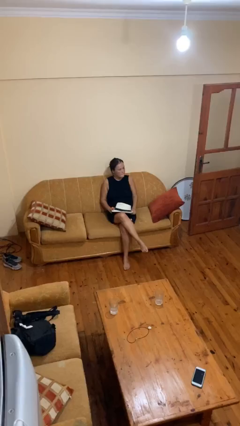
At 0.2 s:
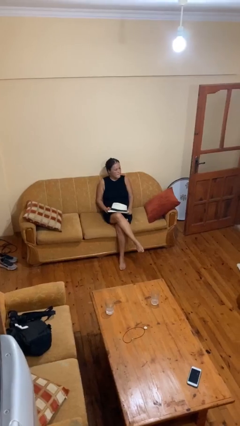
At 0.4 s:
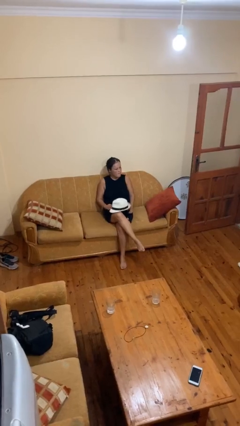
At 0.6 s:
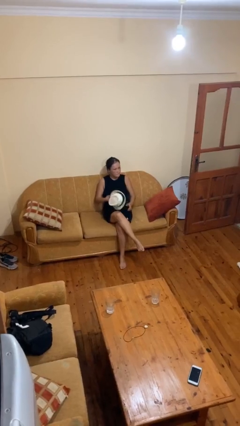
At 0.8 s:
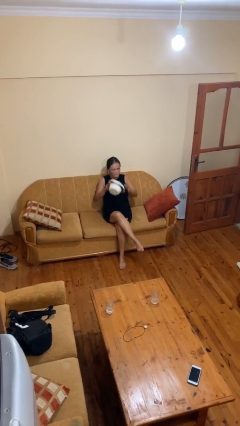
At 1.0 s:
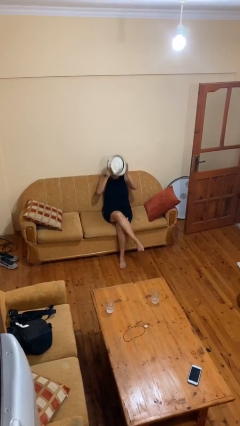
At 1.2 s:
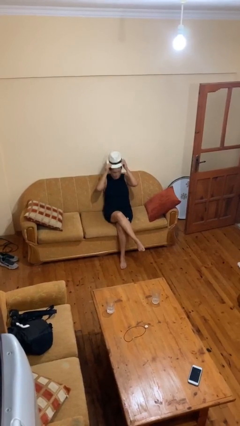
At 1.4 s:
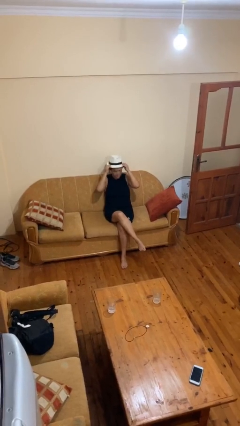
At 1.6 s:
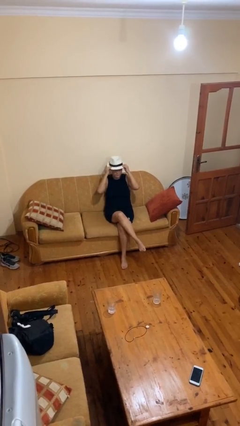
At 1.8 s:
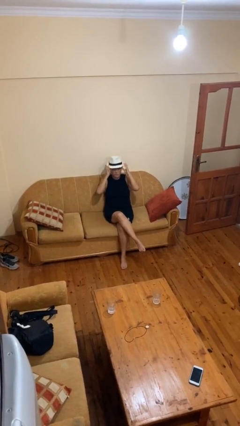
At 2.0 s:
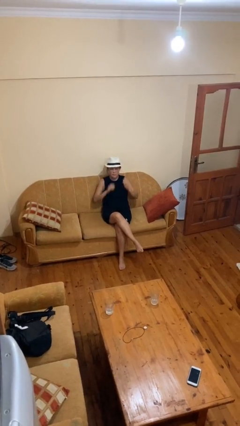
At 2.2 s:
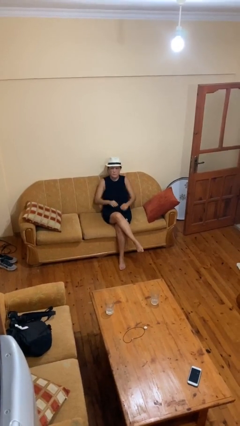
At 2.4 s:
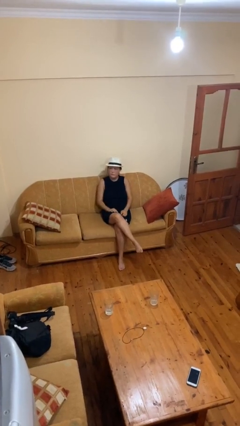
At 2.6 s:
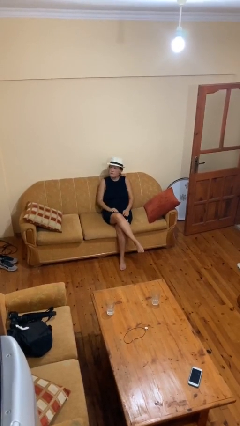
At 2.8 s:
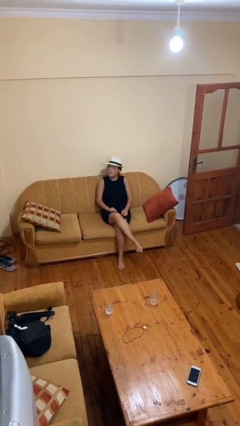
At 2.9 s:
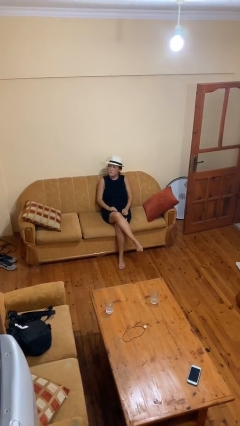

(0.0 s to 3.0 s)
person puts on hat

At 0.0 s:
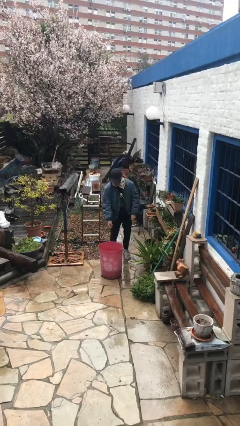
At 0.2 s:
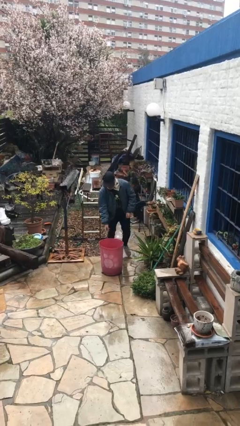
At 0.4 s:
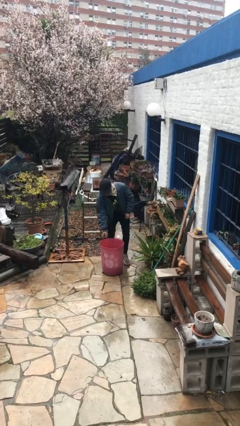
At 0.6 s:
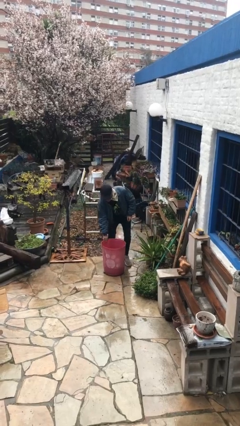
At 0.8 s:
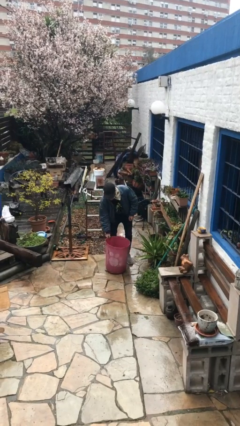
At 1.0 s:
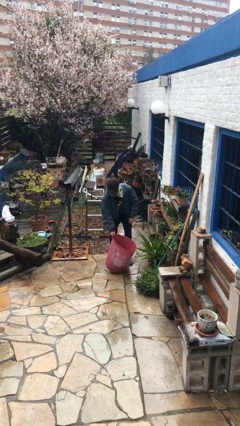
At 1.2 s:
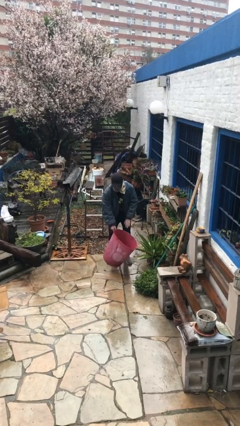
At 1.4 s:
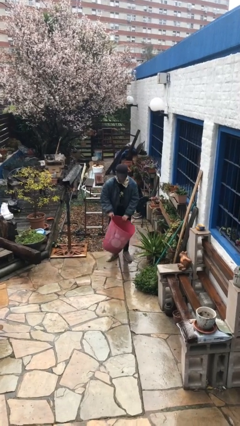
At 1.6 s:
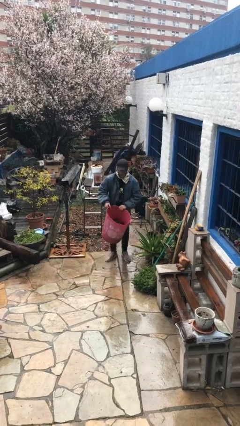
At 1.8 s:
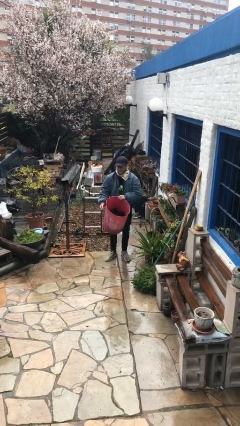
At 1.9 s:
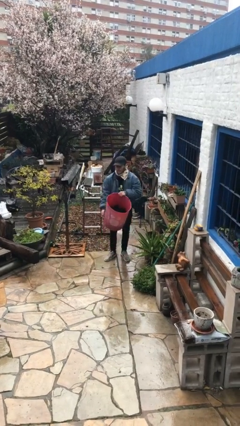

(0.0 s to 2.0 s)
person picks up object from floor

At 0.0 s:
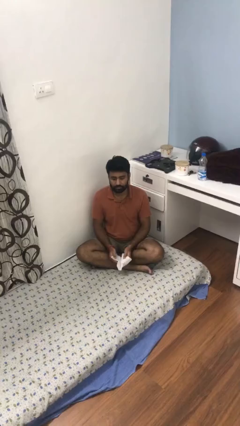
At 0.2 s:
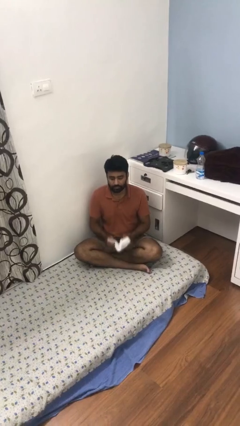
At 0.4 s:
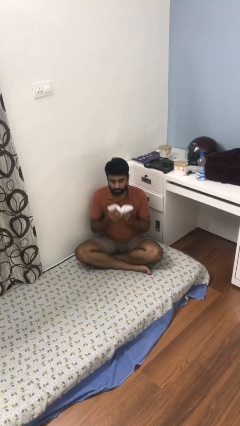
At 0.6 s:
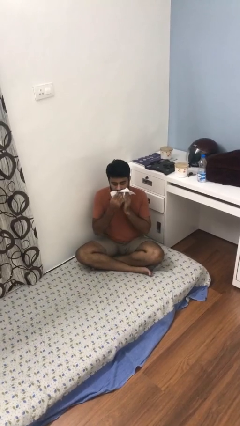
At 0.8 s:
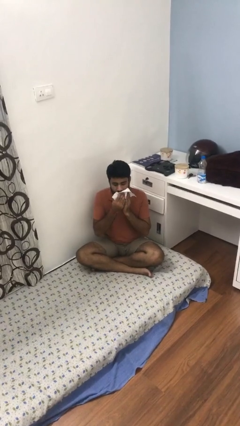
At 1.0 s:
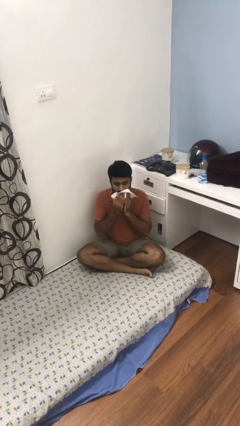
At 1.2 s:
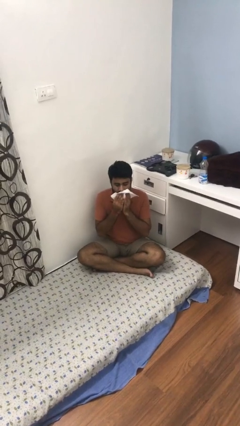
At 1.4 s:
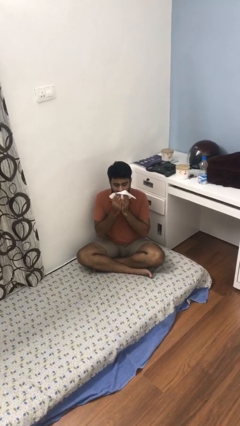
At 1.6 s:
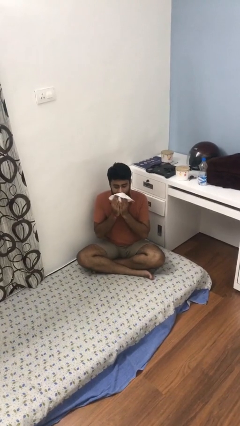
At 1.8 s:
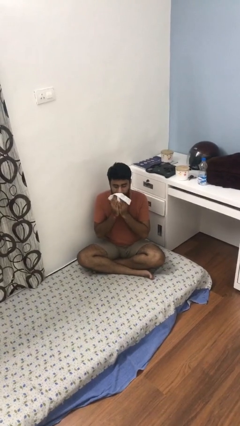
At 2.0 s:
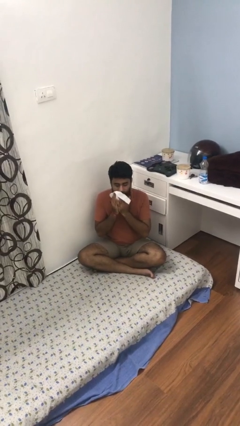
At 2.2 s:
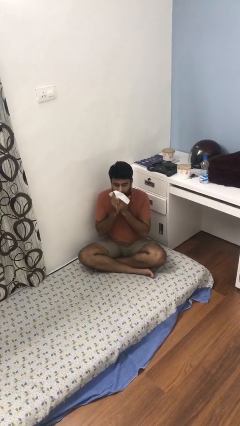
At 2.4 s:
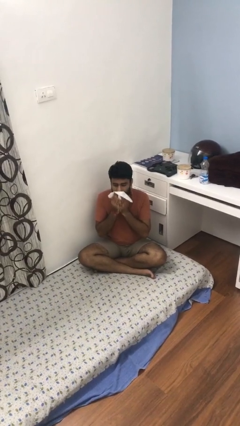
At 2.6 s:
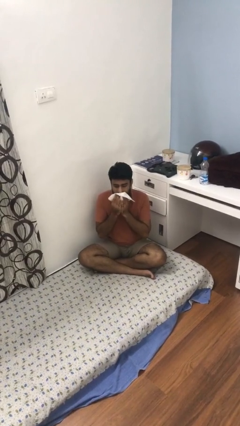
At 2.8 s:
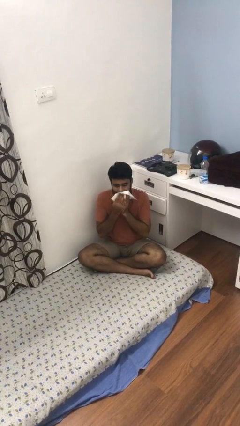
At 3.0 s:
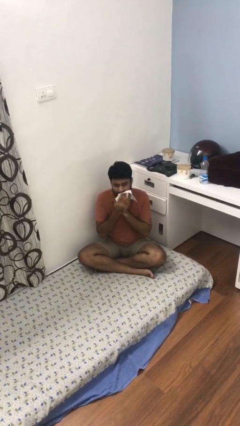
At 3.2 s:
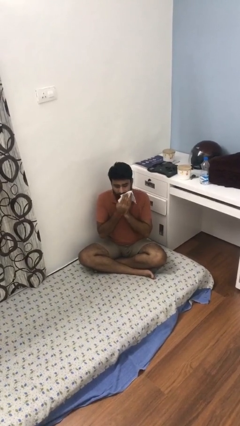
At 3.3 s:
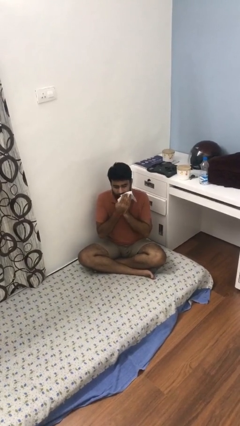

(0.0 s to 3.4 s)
person wipes mouth with napkin

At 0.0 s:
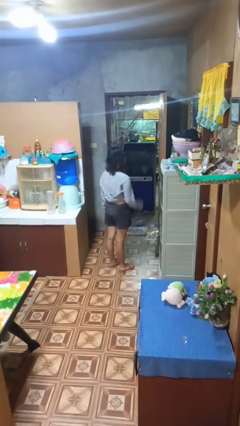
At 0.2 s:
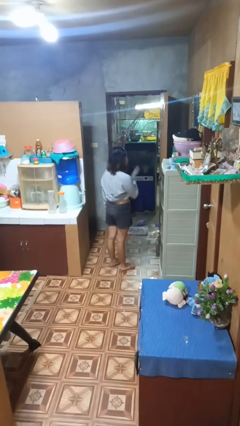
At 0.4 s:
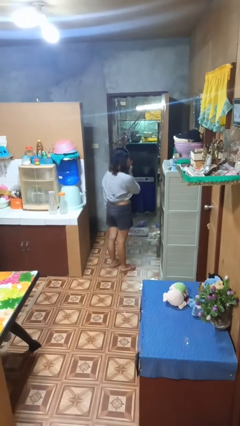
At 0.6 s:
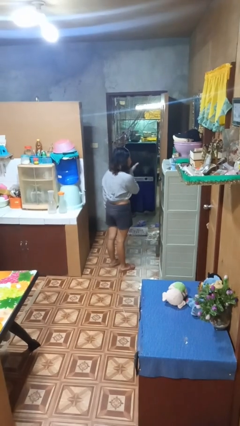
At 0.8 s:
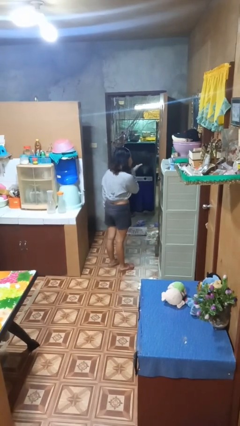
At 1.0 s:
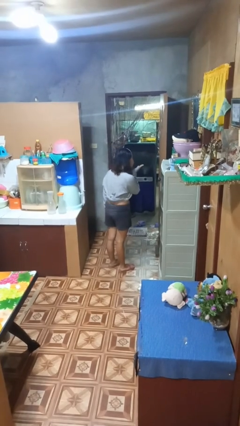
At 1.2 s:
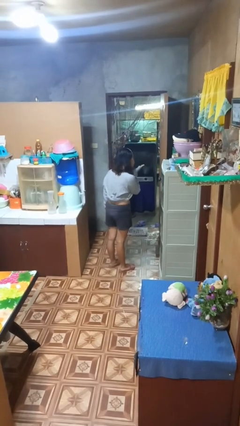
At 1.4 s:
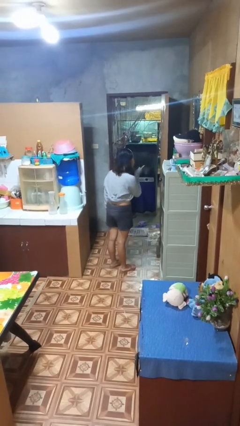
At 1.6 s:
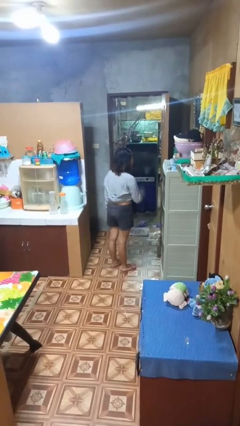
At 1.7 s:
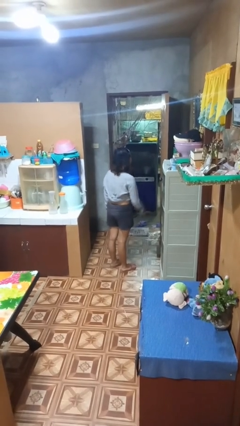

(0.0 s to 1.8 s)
person gestures blow kiss

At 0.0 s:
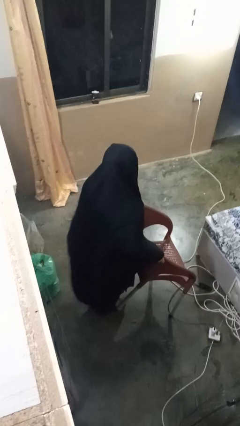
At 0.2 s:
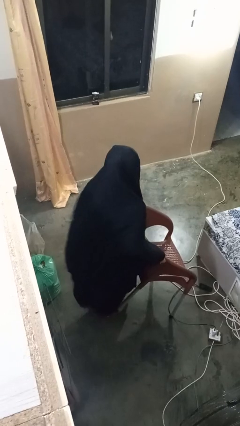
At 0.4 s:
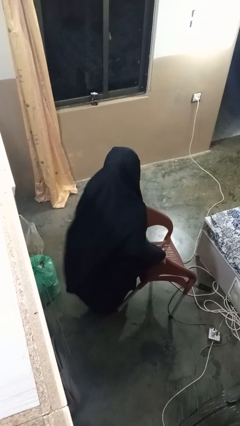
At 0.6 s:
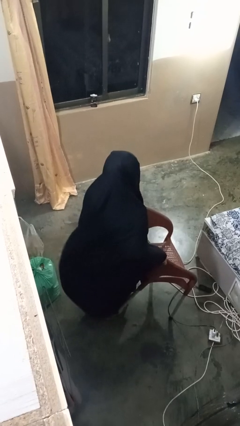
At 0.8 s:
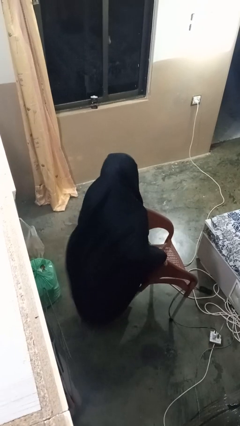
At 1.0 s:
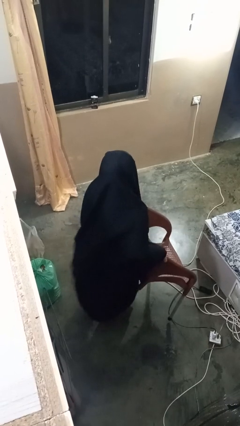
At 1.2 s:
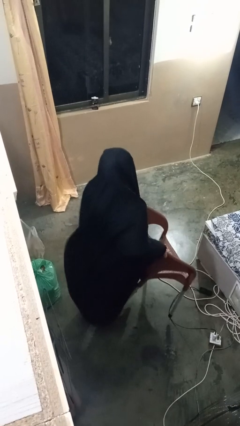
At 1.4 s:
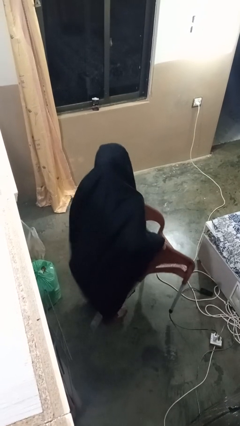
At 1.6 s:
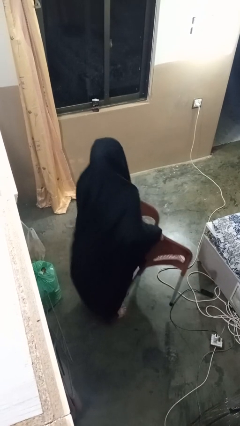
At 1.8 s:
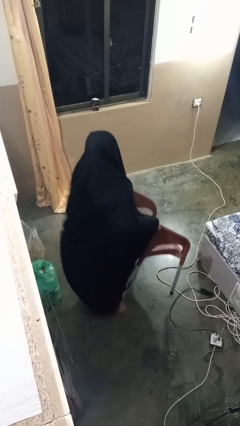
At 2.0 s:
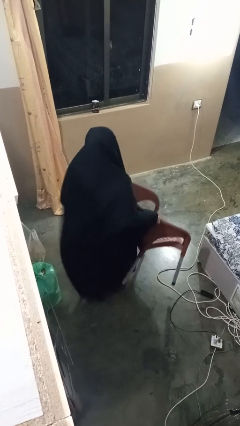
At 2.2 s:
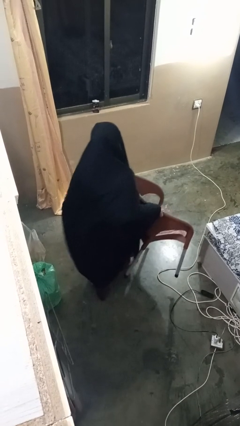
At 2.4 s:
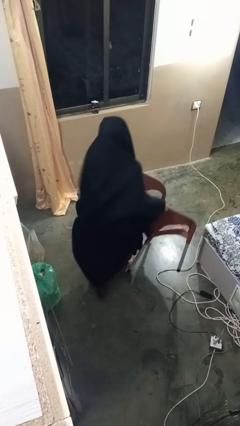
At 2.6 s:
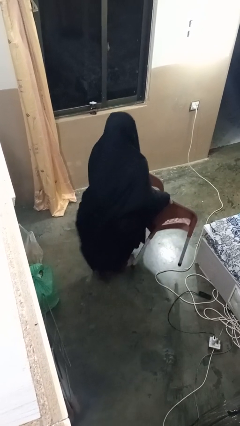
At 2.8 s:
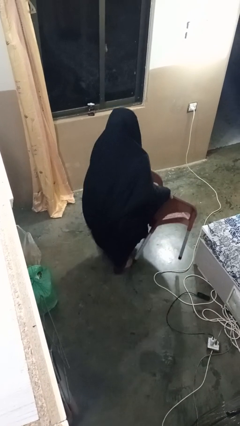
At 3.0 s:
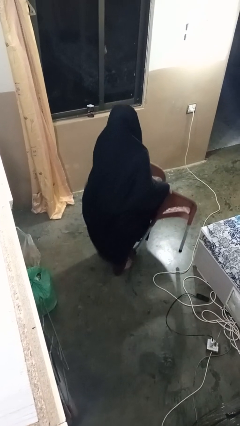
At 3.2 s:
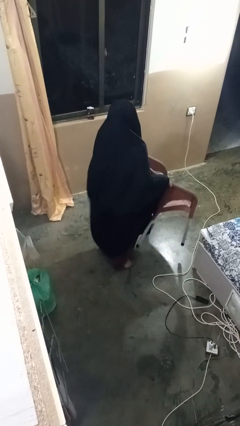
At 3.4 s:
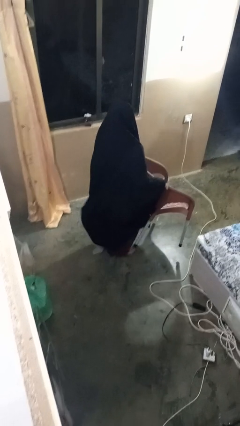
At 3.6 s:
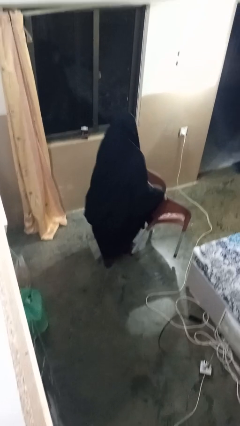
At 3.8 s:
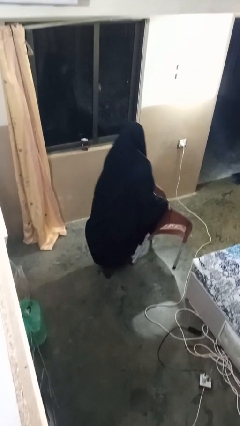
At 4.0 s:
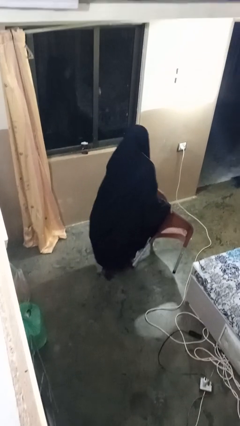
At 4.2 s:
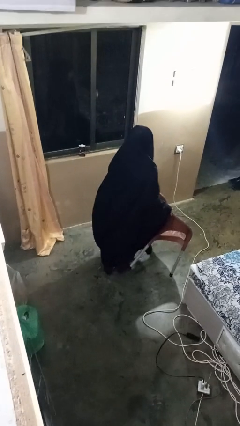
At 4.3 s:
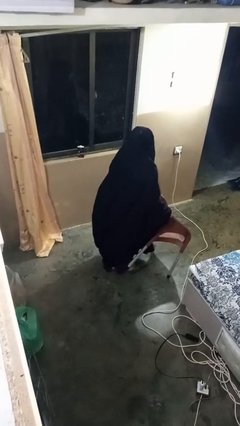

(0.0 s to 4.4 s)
person carries furniture

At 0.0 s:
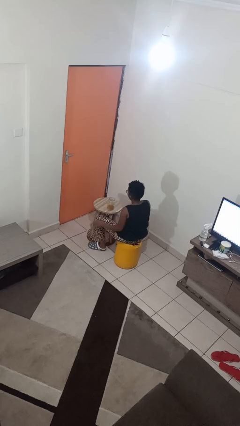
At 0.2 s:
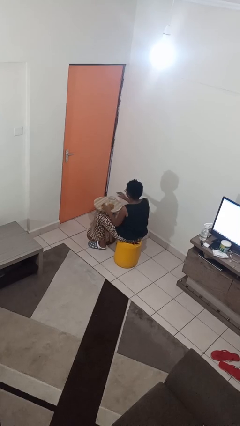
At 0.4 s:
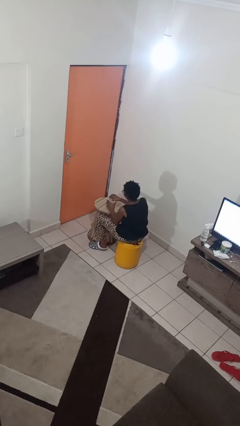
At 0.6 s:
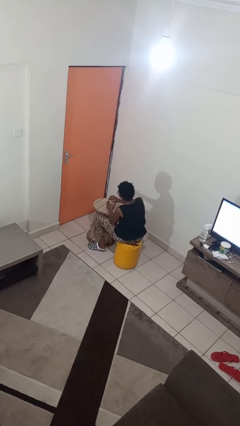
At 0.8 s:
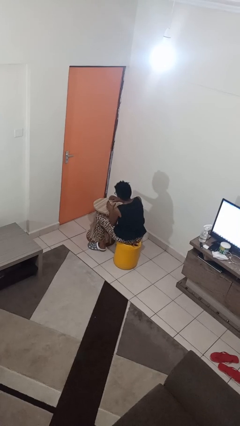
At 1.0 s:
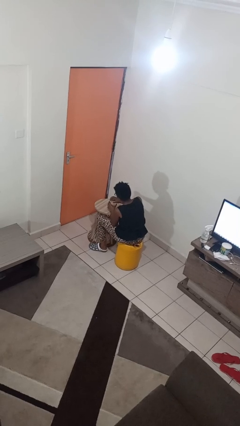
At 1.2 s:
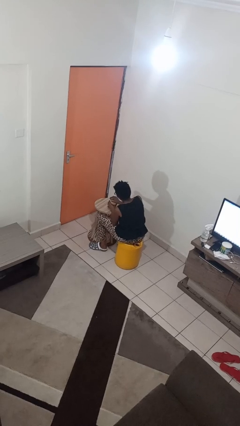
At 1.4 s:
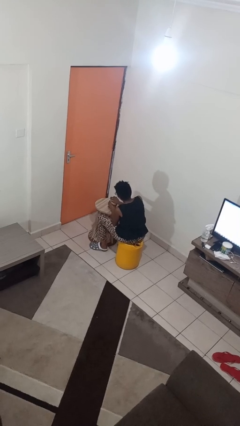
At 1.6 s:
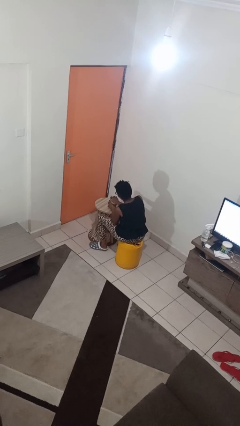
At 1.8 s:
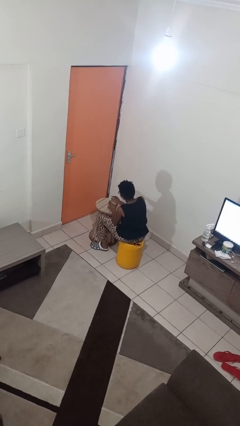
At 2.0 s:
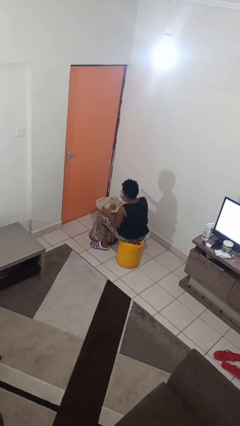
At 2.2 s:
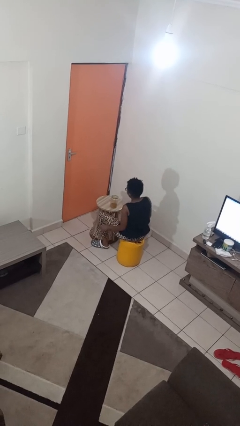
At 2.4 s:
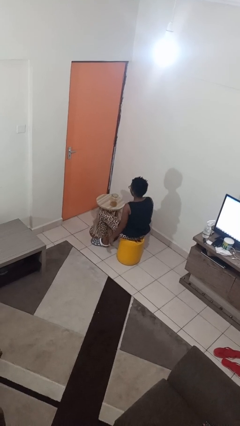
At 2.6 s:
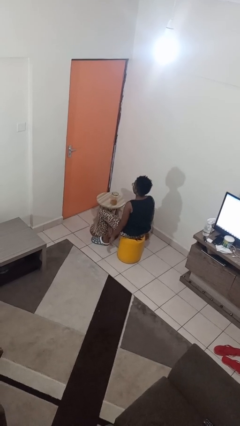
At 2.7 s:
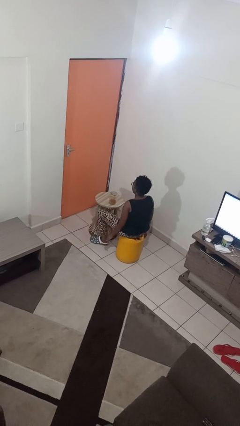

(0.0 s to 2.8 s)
person closes jar

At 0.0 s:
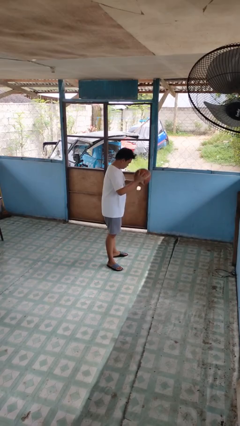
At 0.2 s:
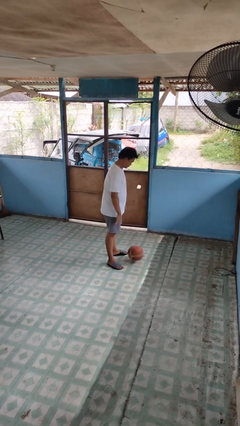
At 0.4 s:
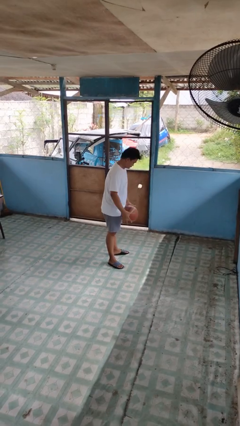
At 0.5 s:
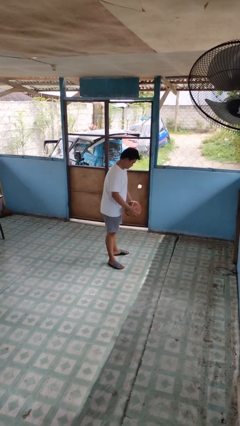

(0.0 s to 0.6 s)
person bounces ball on floor
